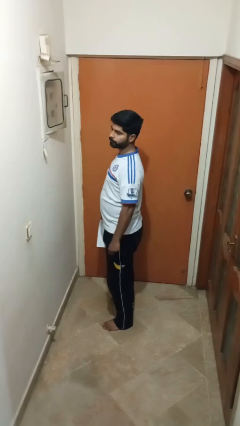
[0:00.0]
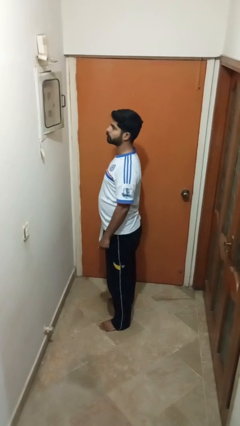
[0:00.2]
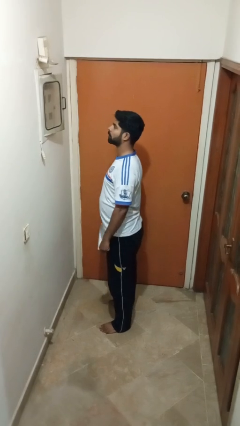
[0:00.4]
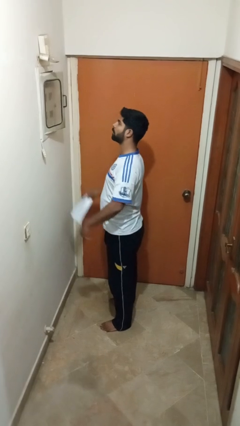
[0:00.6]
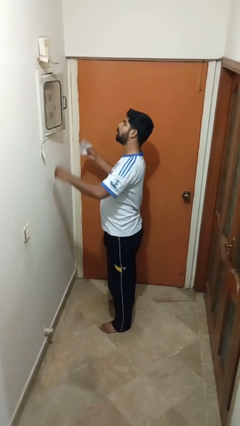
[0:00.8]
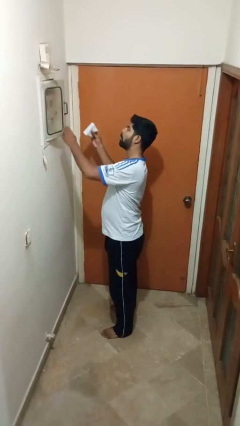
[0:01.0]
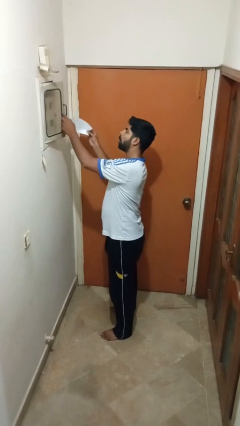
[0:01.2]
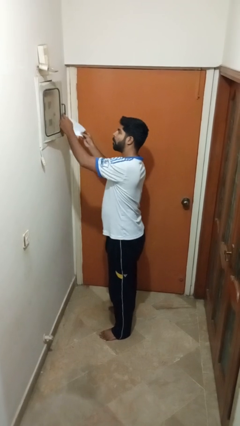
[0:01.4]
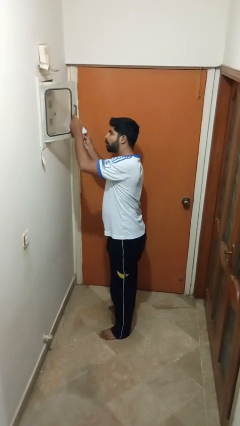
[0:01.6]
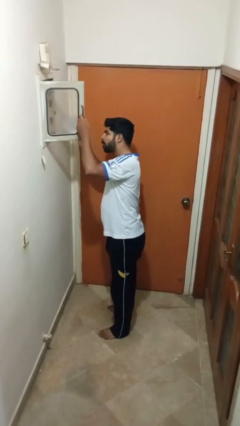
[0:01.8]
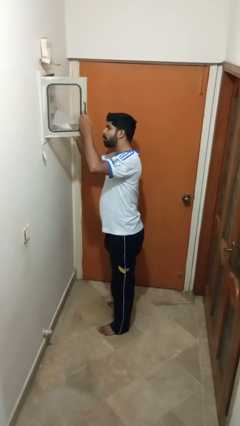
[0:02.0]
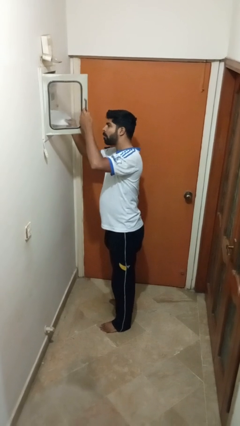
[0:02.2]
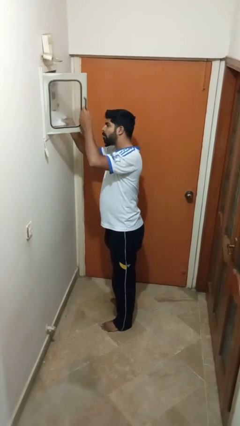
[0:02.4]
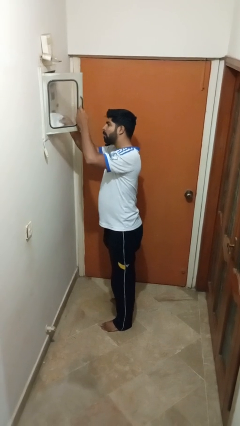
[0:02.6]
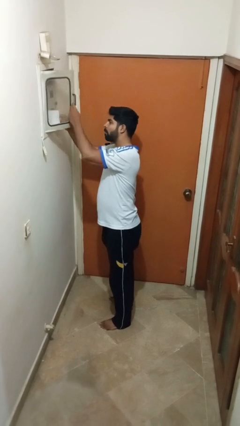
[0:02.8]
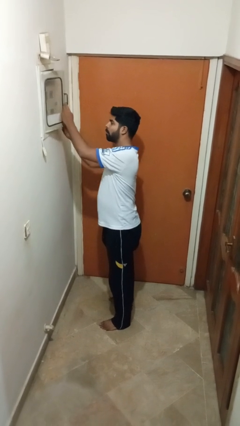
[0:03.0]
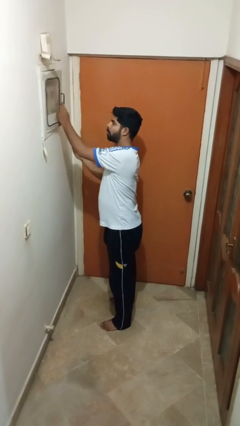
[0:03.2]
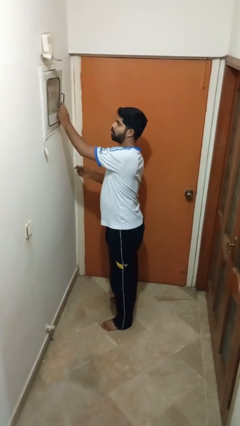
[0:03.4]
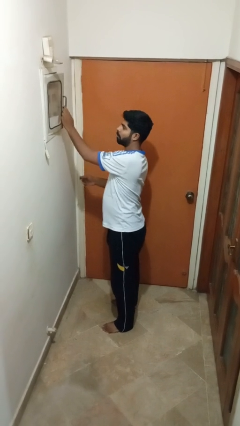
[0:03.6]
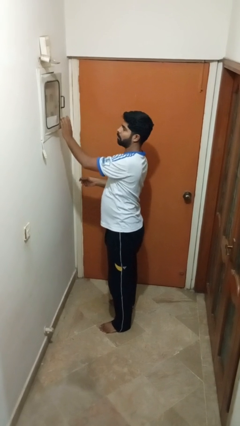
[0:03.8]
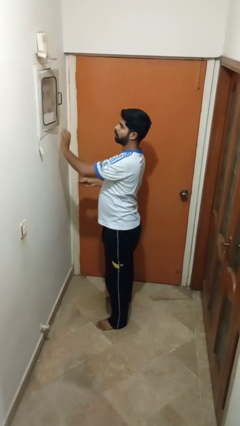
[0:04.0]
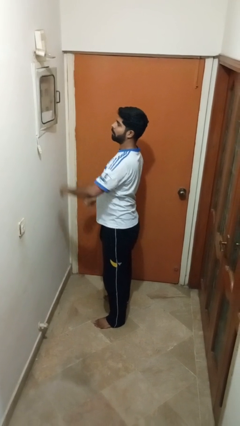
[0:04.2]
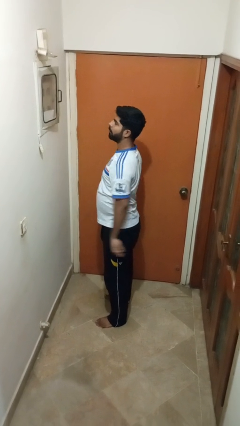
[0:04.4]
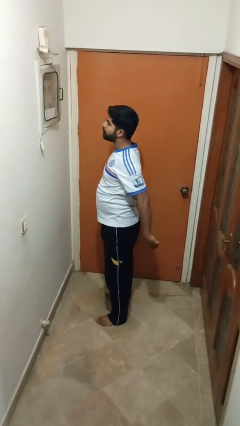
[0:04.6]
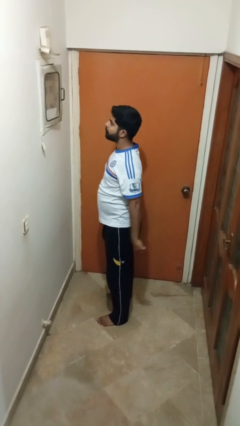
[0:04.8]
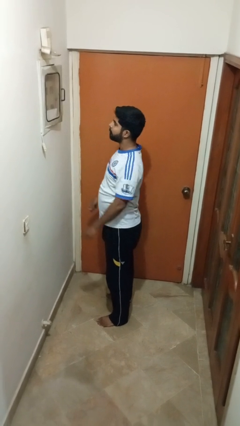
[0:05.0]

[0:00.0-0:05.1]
person puts letters in mailbox

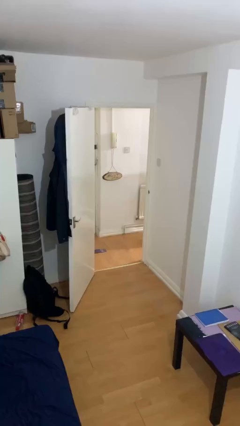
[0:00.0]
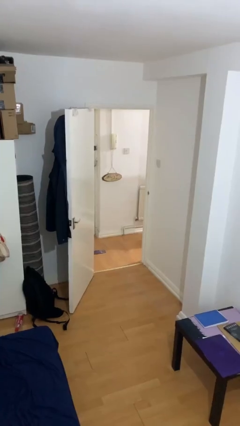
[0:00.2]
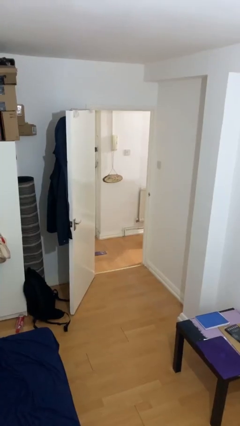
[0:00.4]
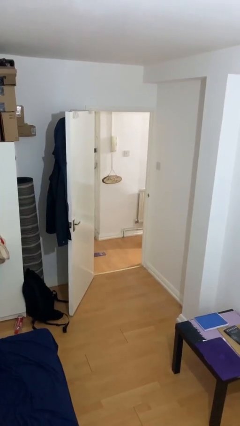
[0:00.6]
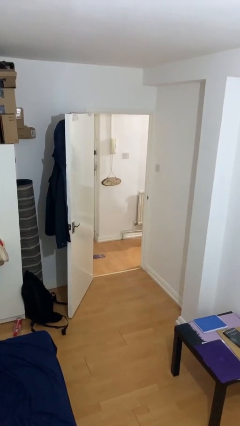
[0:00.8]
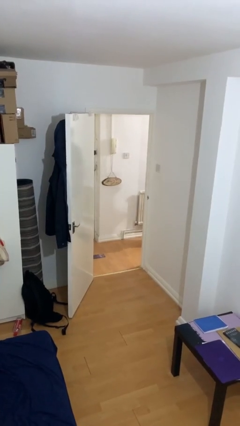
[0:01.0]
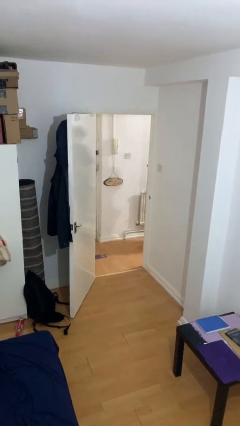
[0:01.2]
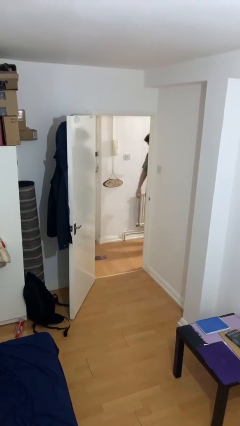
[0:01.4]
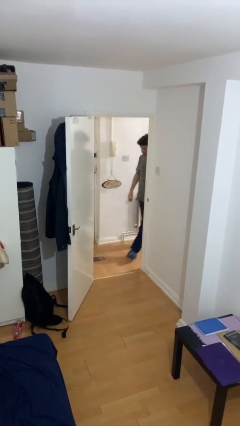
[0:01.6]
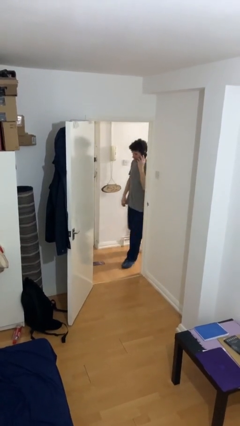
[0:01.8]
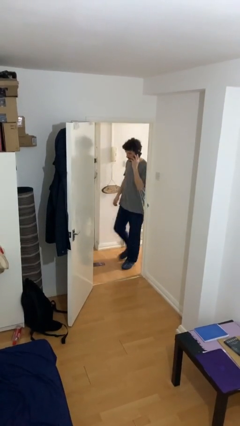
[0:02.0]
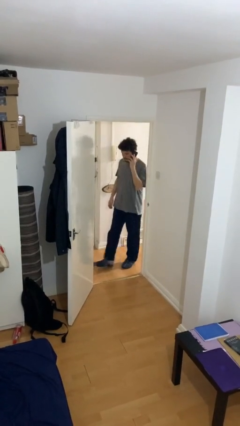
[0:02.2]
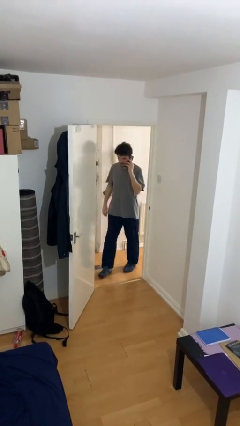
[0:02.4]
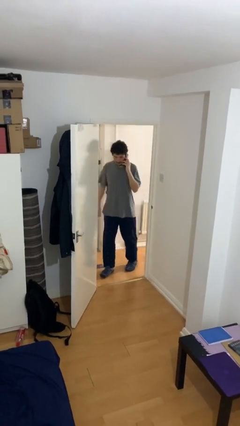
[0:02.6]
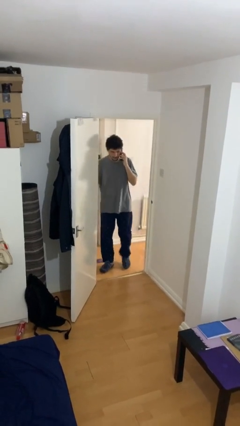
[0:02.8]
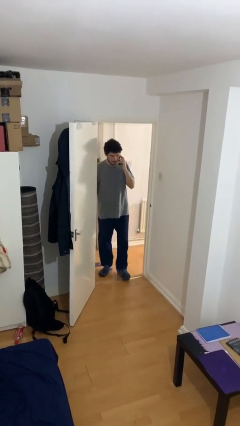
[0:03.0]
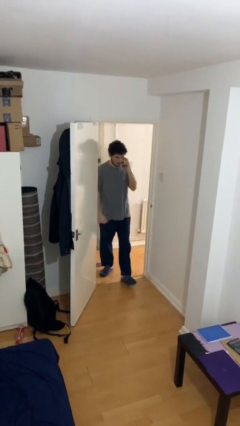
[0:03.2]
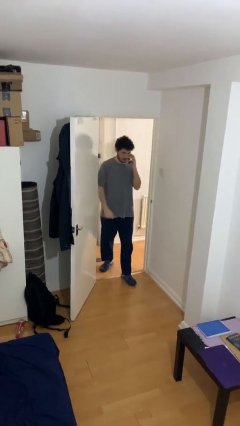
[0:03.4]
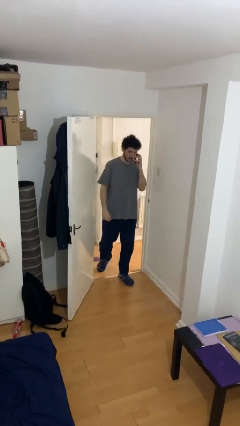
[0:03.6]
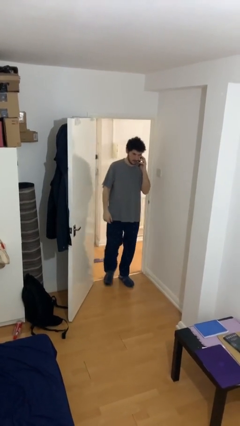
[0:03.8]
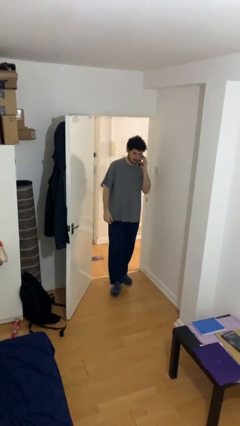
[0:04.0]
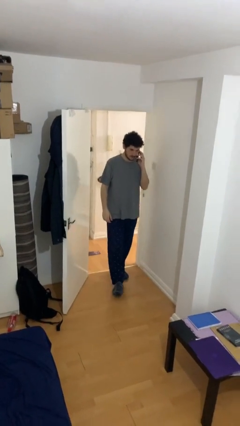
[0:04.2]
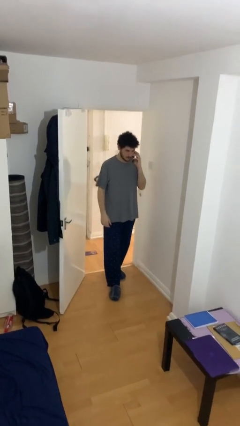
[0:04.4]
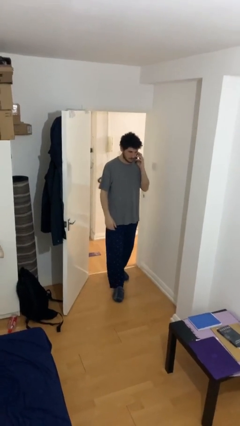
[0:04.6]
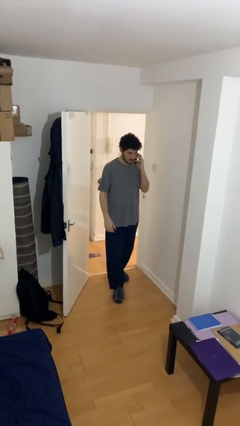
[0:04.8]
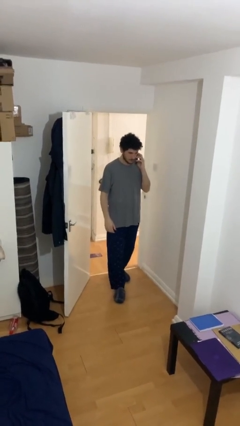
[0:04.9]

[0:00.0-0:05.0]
person enters scene through structure

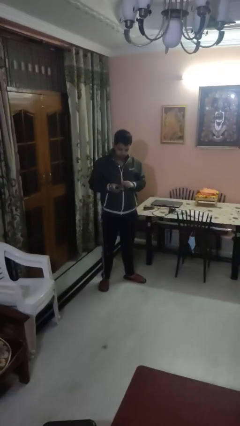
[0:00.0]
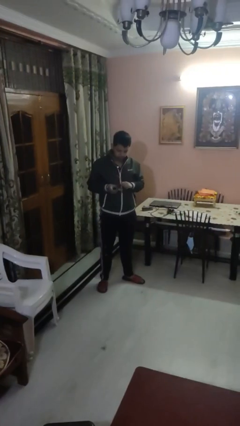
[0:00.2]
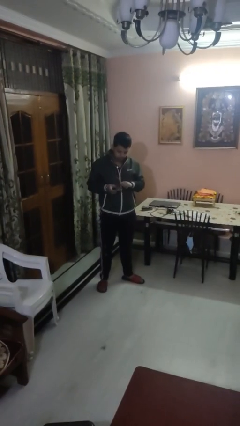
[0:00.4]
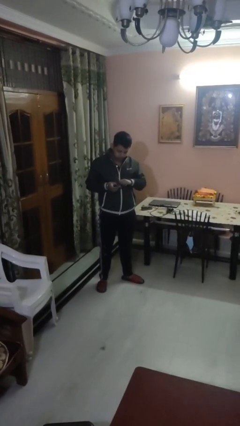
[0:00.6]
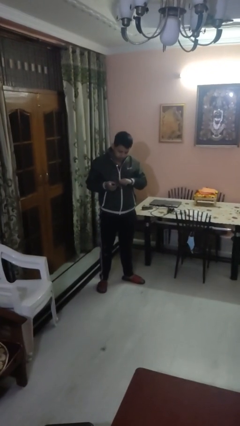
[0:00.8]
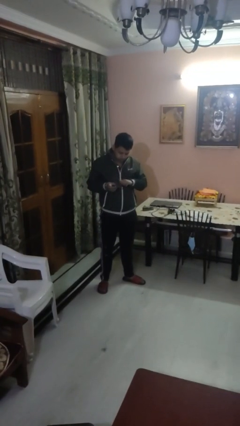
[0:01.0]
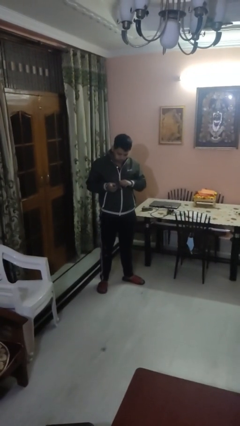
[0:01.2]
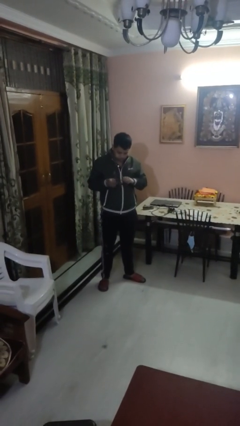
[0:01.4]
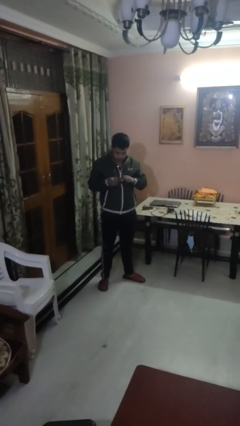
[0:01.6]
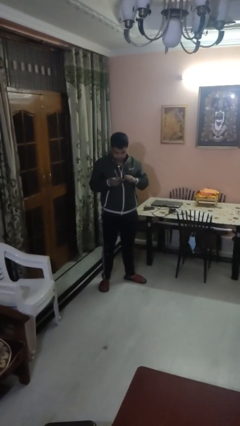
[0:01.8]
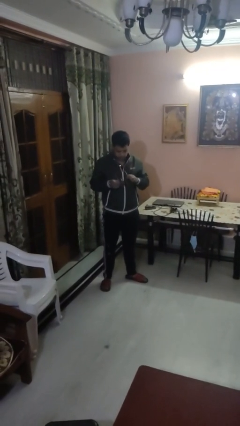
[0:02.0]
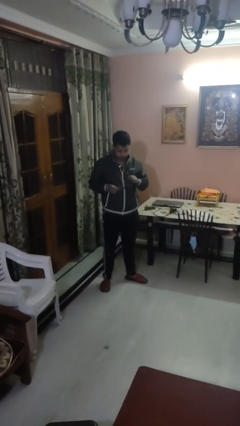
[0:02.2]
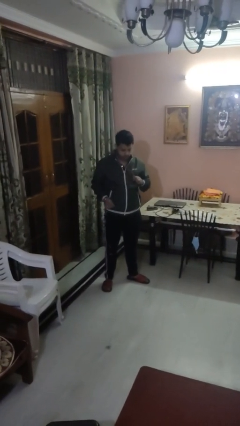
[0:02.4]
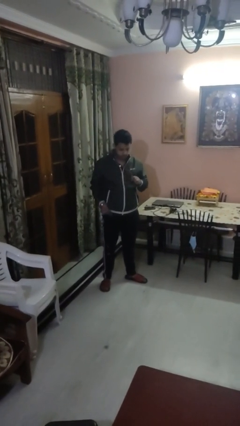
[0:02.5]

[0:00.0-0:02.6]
person cleans eyeglasses

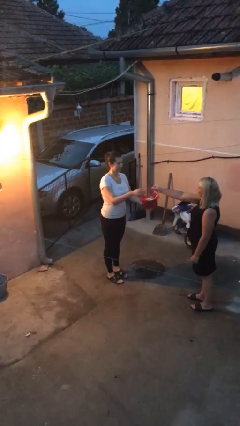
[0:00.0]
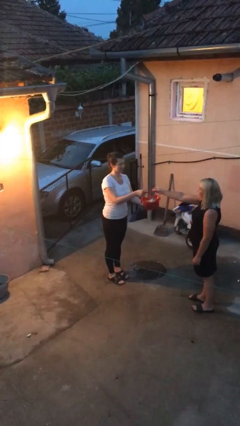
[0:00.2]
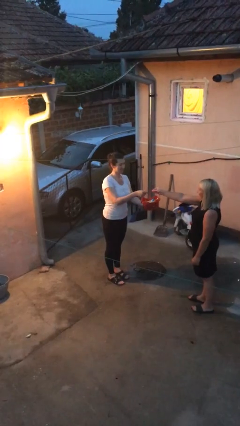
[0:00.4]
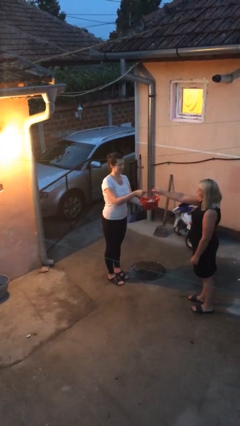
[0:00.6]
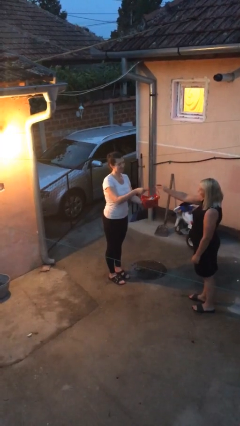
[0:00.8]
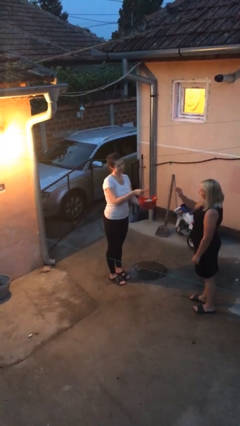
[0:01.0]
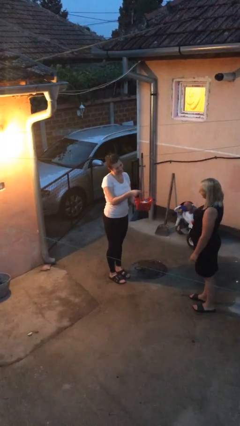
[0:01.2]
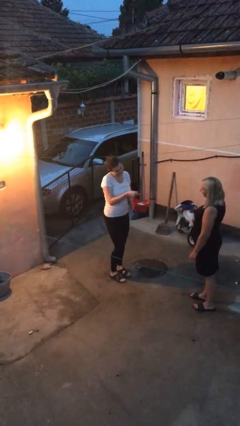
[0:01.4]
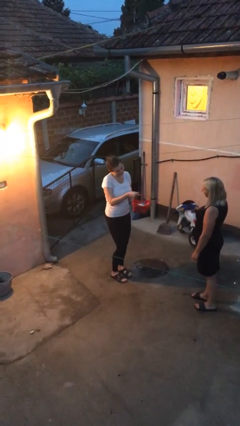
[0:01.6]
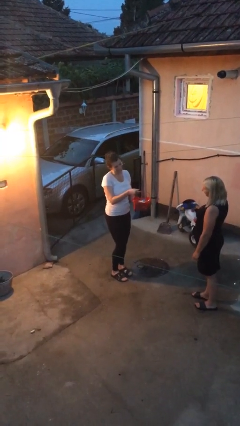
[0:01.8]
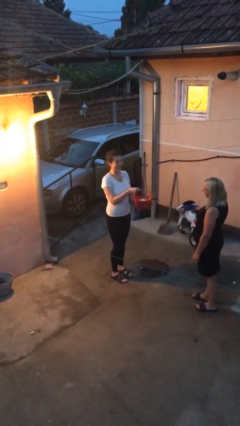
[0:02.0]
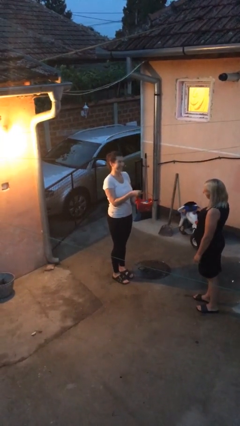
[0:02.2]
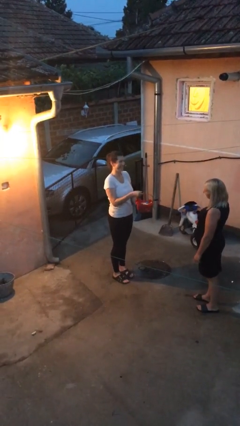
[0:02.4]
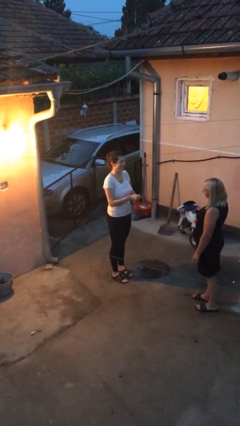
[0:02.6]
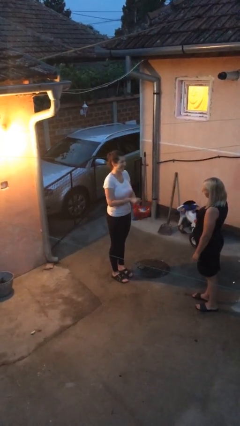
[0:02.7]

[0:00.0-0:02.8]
person transfers object to person

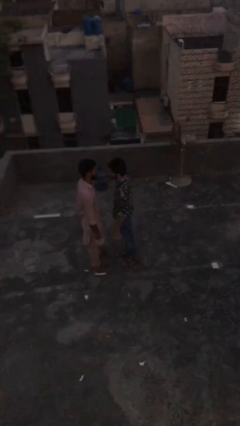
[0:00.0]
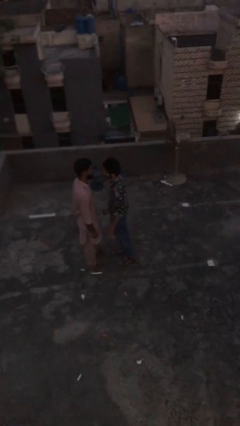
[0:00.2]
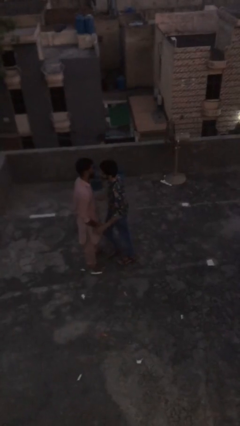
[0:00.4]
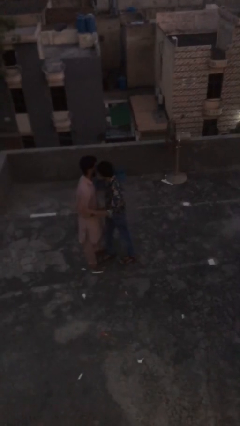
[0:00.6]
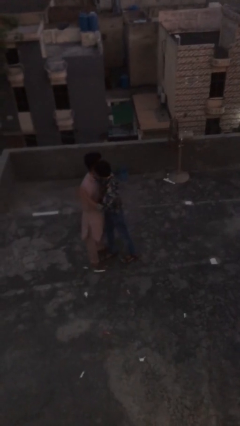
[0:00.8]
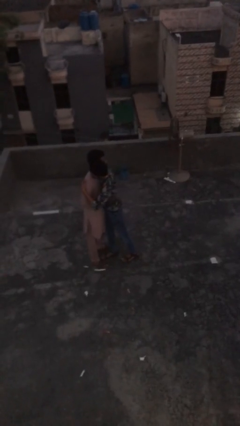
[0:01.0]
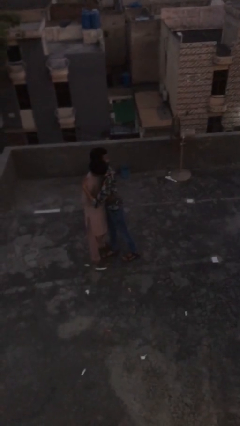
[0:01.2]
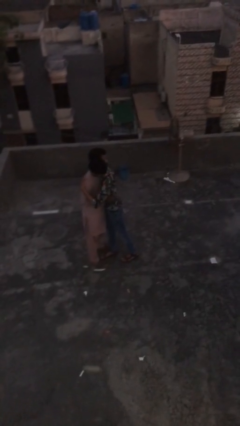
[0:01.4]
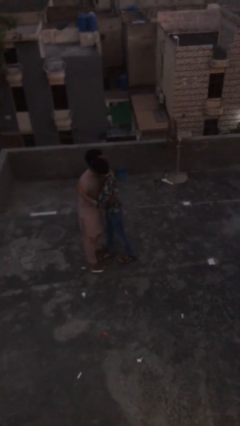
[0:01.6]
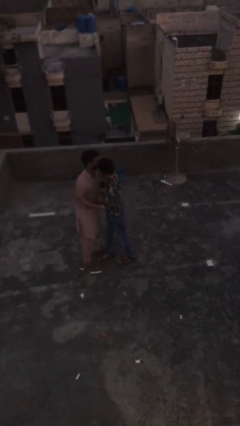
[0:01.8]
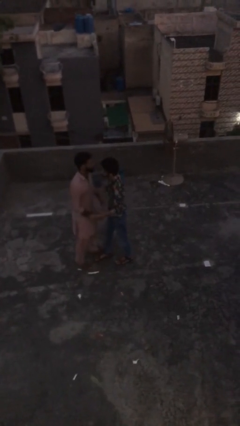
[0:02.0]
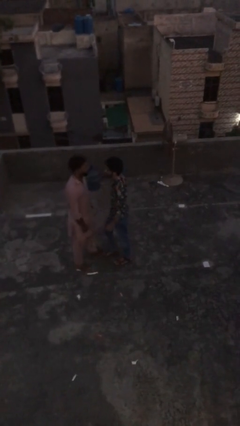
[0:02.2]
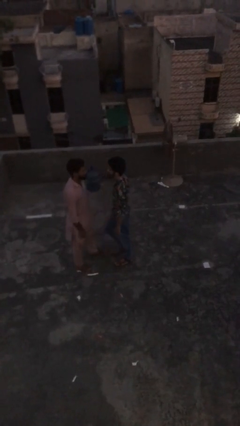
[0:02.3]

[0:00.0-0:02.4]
person embraces person
